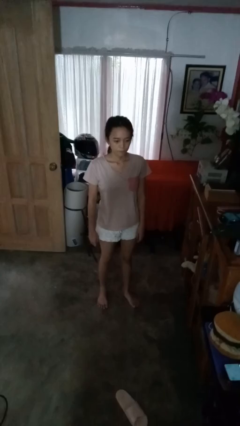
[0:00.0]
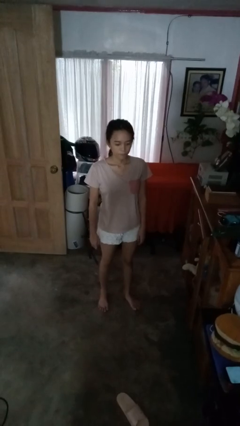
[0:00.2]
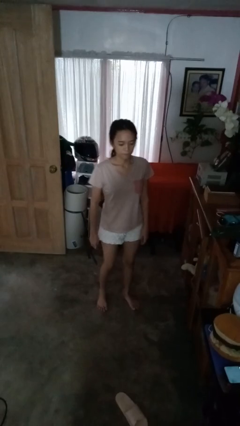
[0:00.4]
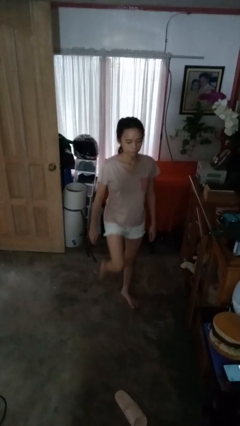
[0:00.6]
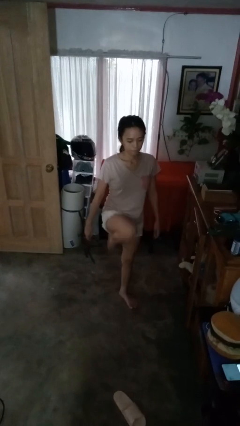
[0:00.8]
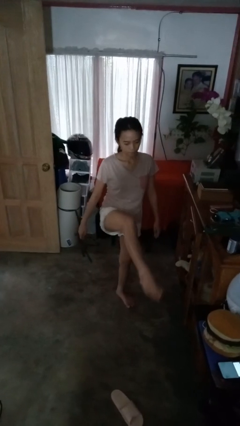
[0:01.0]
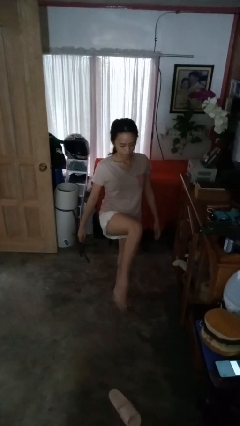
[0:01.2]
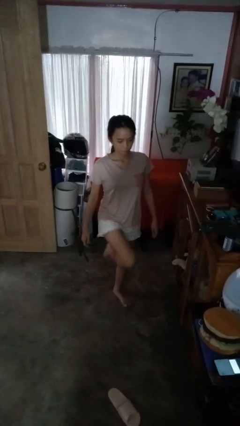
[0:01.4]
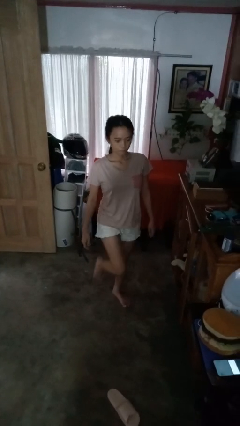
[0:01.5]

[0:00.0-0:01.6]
person karate kicks

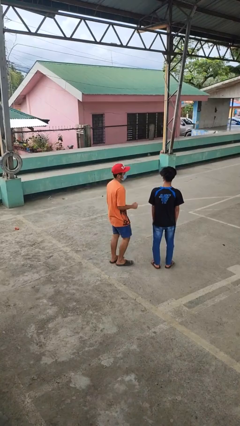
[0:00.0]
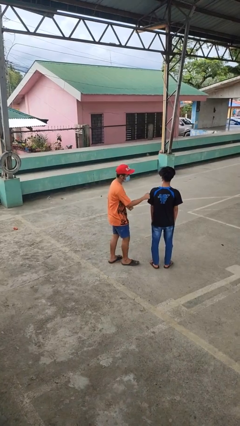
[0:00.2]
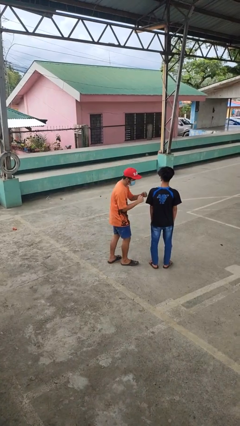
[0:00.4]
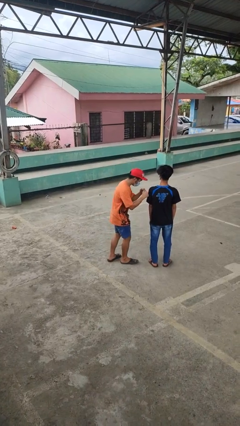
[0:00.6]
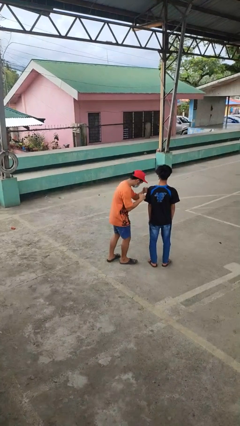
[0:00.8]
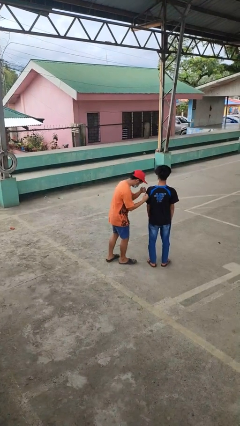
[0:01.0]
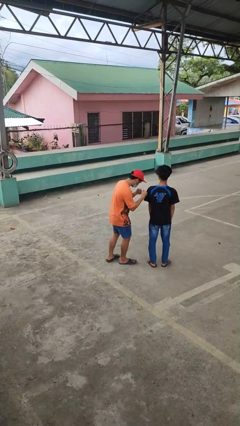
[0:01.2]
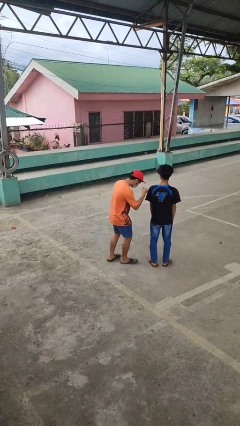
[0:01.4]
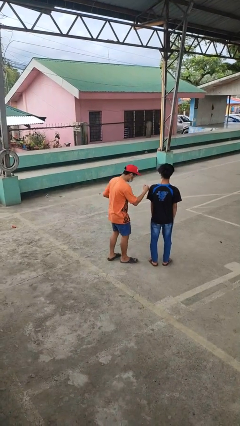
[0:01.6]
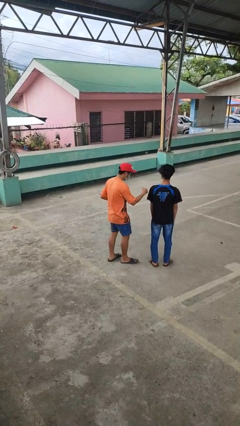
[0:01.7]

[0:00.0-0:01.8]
person pounds shoulders of person

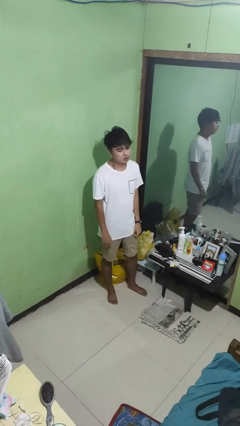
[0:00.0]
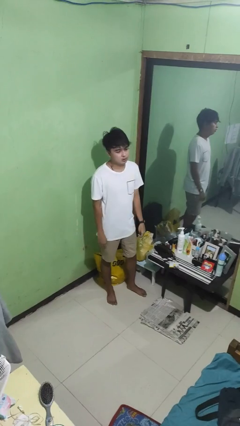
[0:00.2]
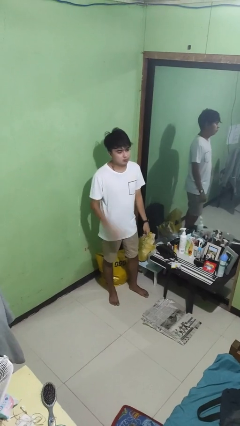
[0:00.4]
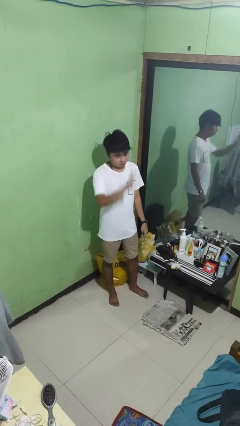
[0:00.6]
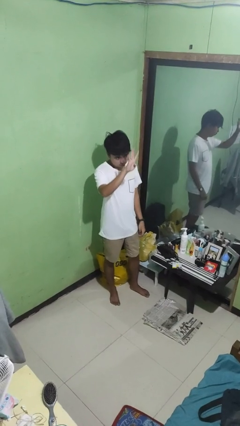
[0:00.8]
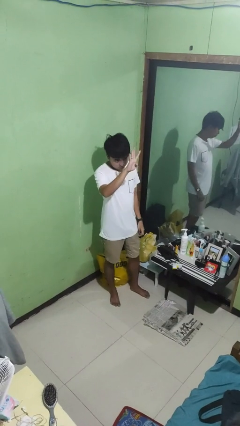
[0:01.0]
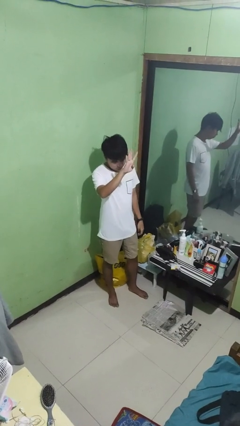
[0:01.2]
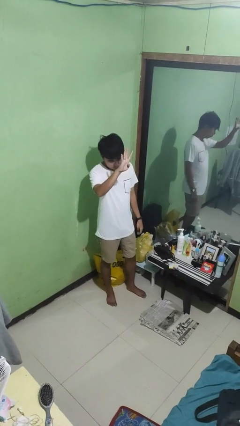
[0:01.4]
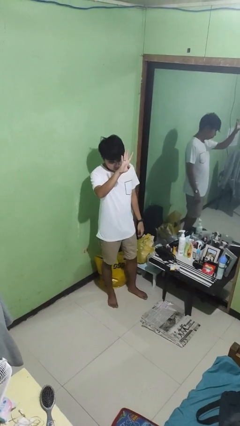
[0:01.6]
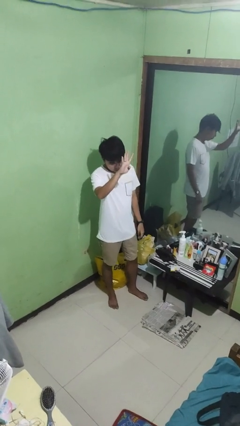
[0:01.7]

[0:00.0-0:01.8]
person gestures number four

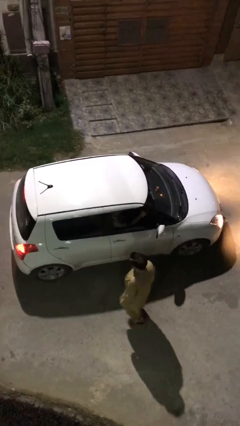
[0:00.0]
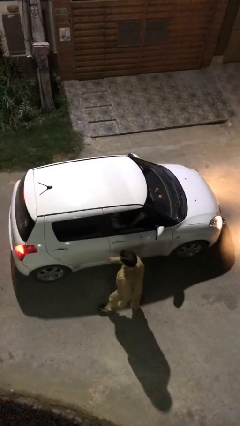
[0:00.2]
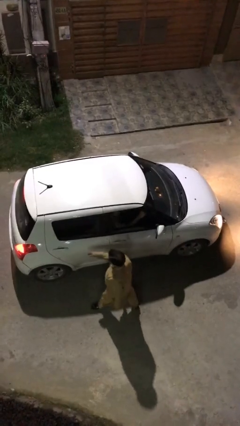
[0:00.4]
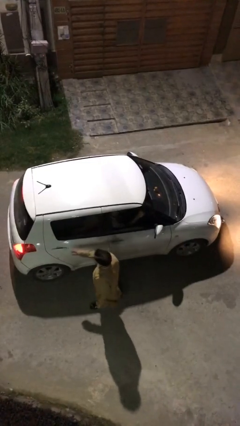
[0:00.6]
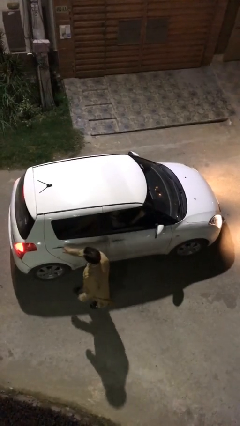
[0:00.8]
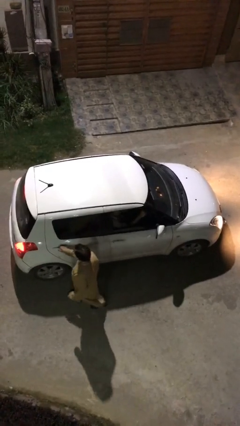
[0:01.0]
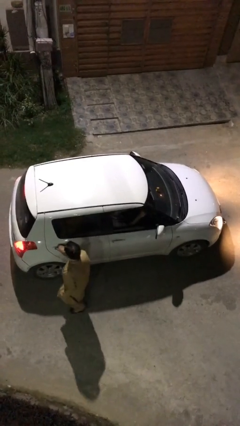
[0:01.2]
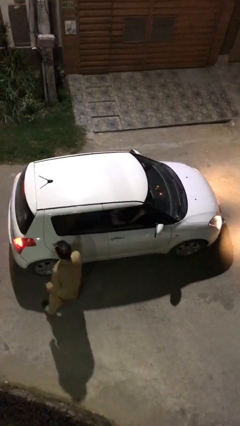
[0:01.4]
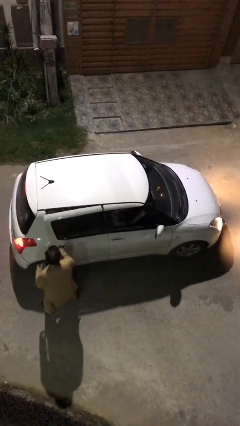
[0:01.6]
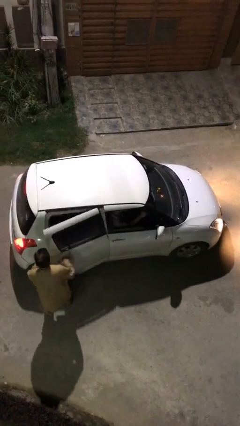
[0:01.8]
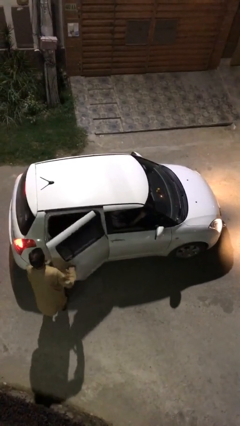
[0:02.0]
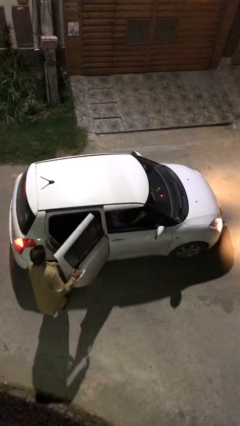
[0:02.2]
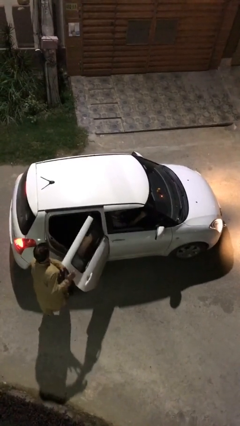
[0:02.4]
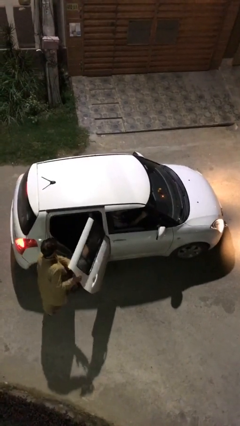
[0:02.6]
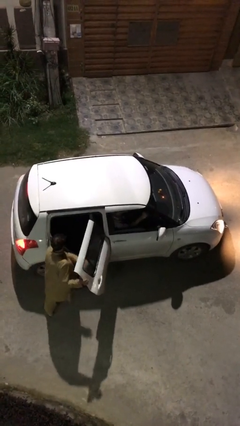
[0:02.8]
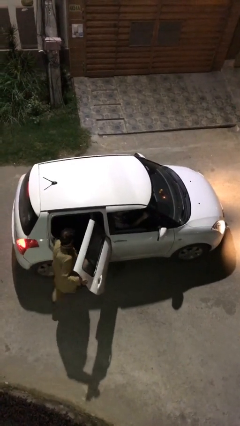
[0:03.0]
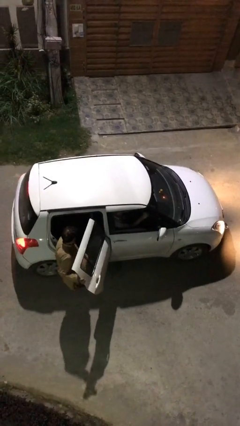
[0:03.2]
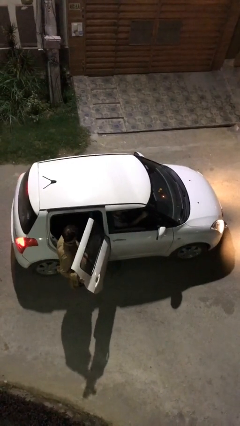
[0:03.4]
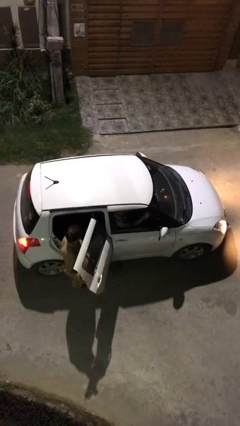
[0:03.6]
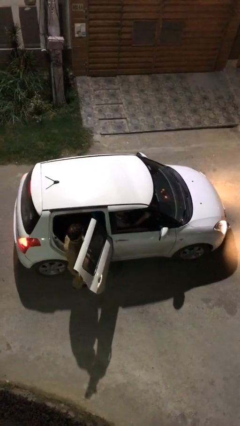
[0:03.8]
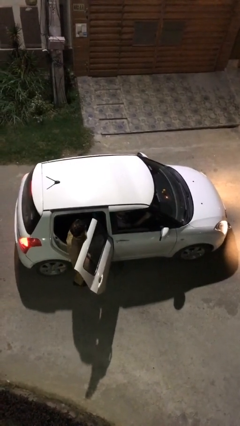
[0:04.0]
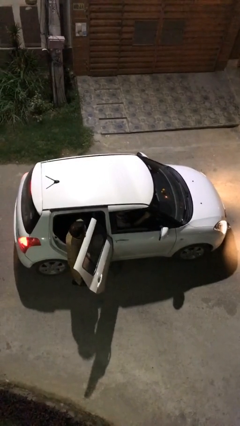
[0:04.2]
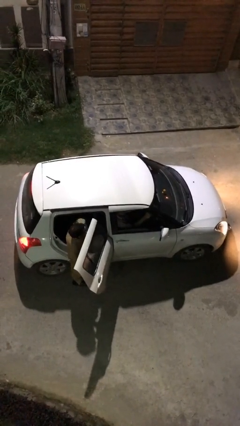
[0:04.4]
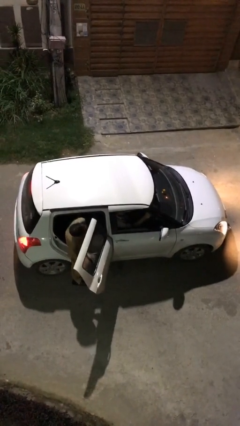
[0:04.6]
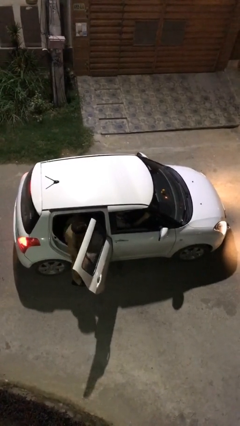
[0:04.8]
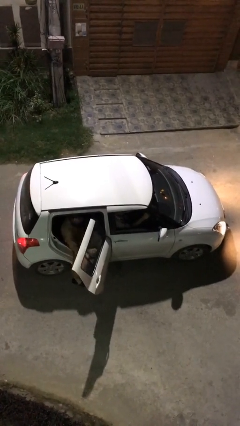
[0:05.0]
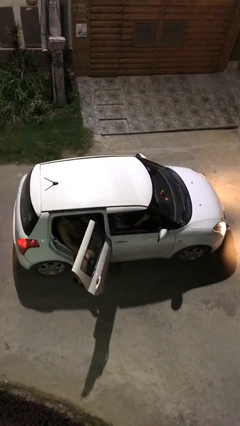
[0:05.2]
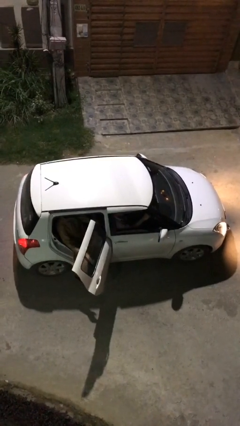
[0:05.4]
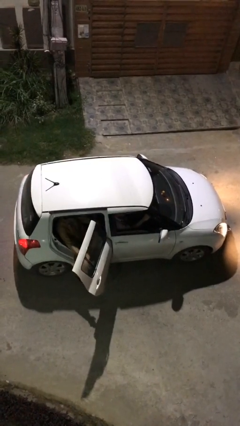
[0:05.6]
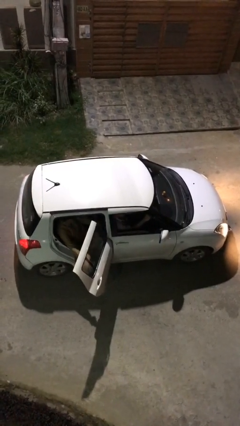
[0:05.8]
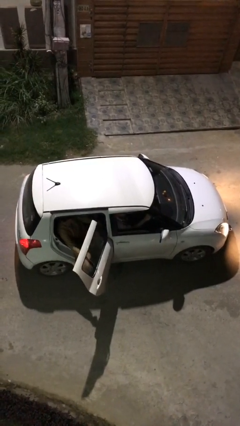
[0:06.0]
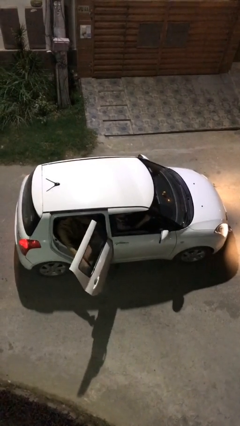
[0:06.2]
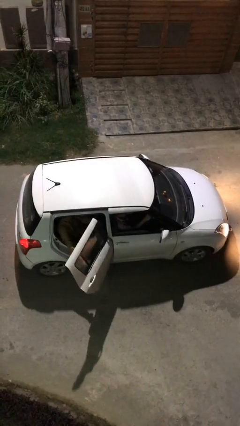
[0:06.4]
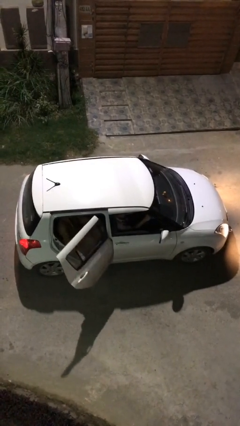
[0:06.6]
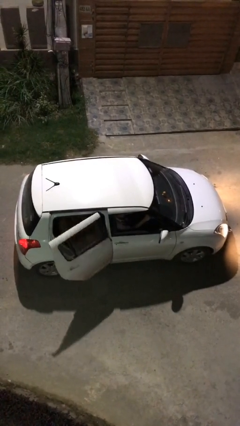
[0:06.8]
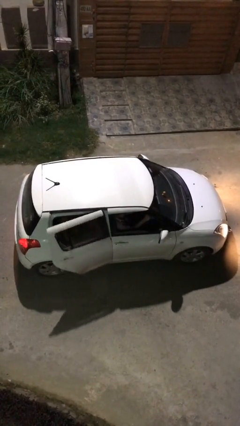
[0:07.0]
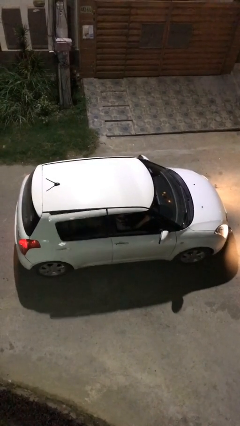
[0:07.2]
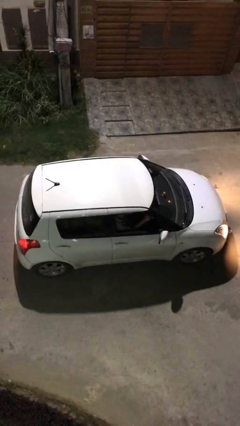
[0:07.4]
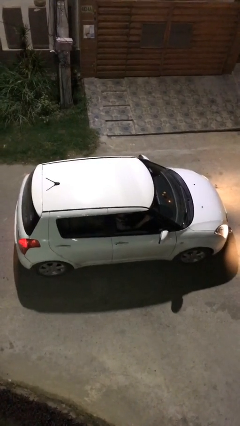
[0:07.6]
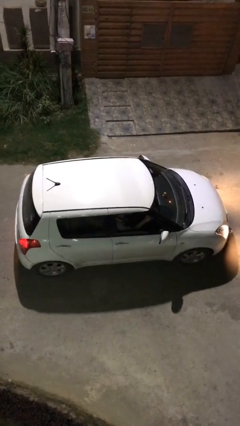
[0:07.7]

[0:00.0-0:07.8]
car picks up person

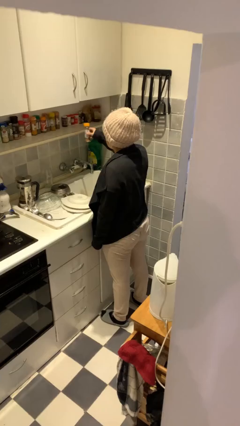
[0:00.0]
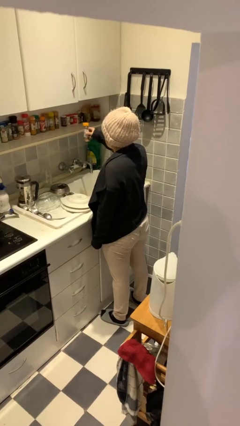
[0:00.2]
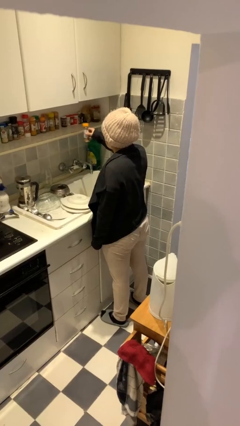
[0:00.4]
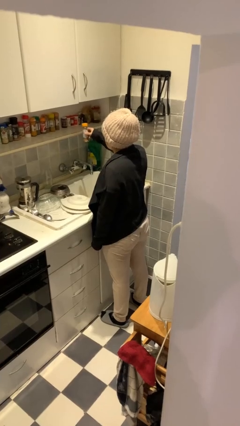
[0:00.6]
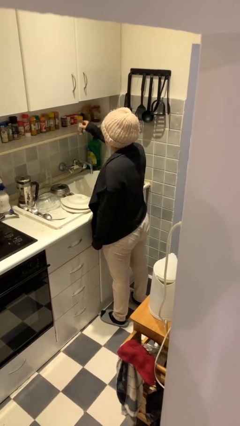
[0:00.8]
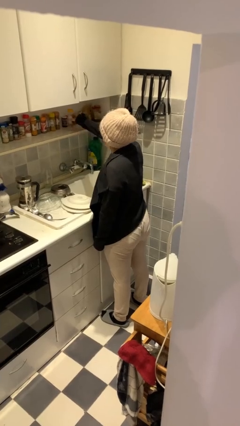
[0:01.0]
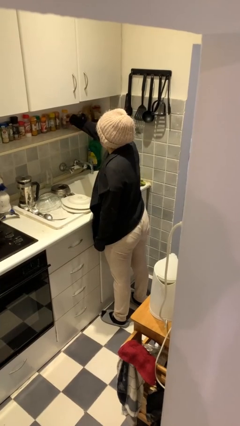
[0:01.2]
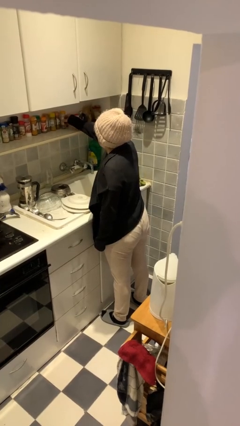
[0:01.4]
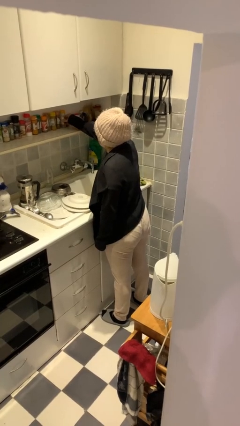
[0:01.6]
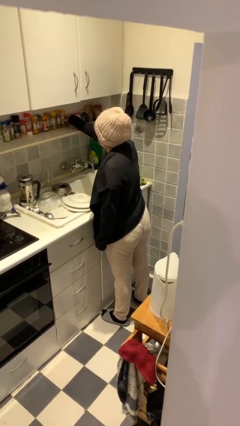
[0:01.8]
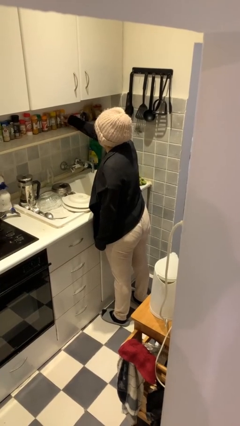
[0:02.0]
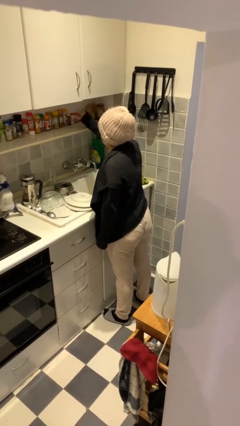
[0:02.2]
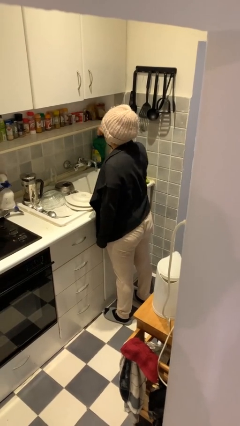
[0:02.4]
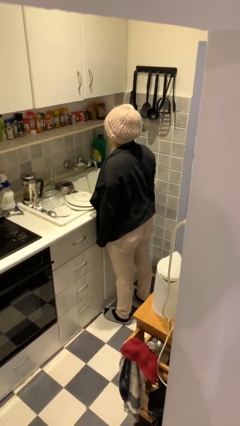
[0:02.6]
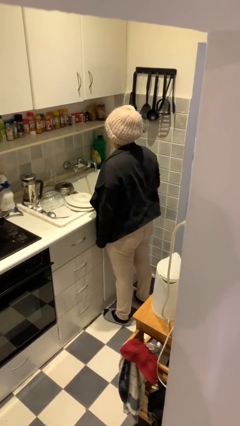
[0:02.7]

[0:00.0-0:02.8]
person puts down object on countertop

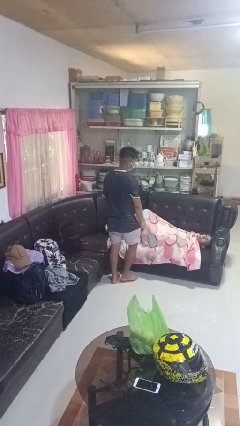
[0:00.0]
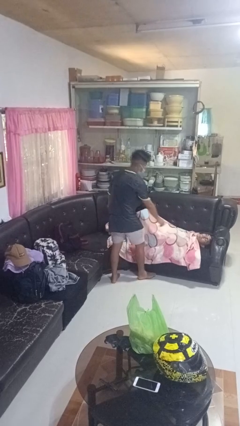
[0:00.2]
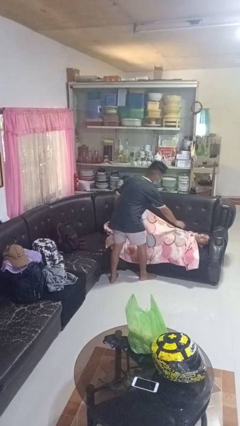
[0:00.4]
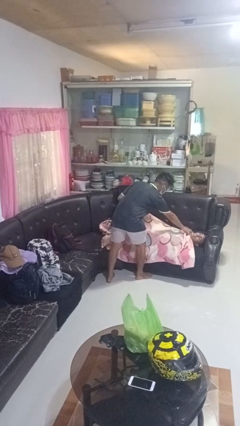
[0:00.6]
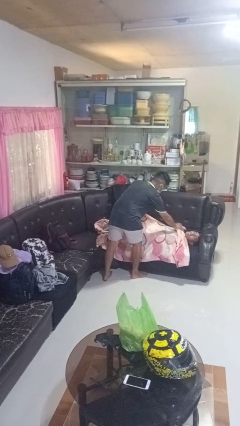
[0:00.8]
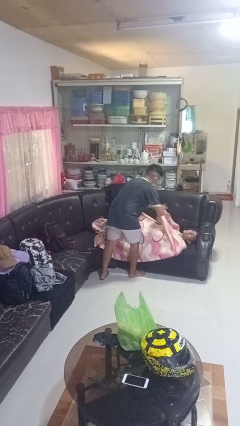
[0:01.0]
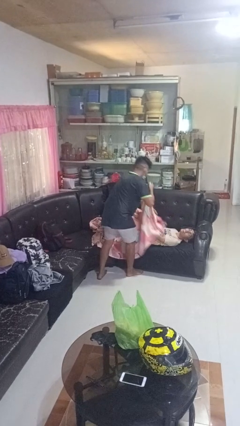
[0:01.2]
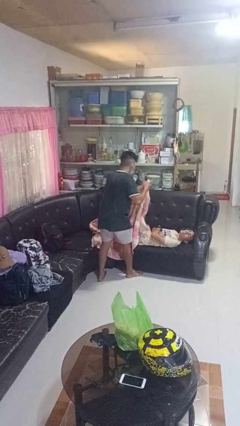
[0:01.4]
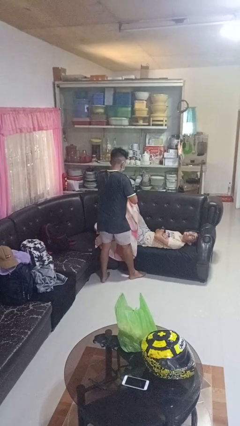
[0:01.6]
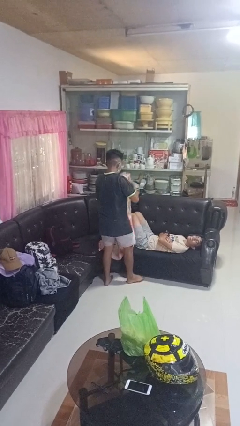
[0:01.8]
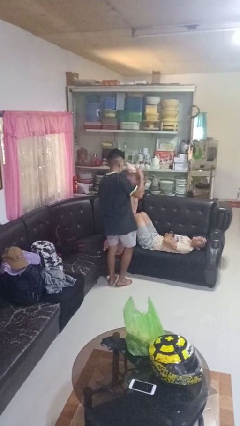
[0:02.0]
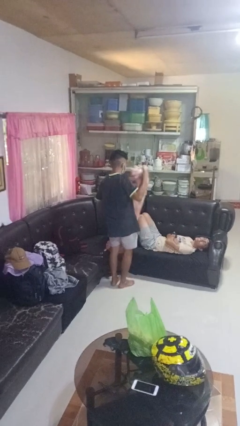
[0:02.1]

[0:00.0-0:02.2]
person uncovers friend with blanket
